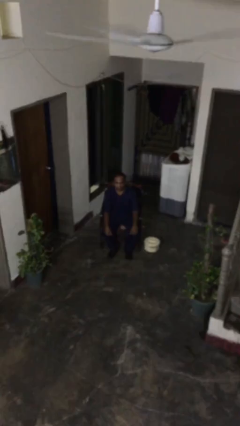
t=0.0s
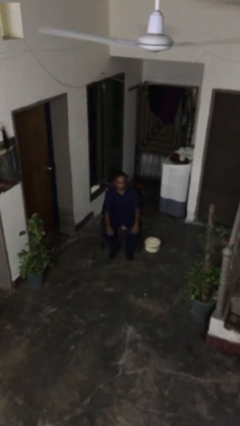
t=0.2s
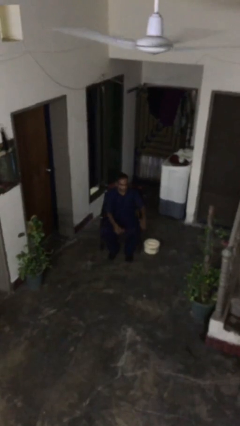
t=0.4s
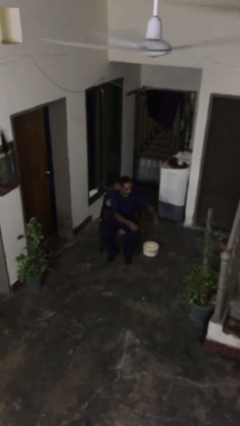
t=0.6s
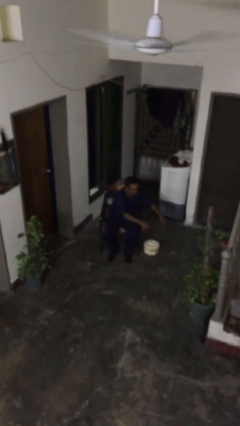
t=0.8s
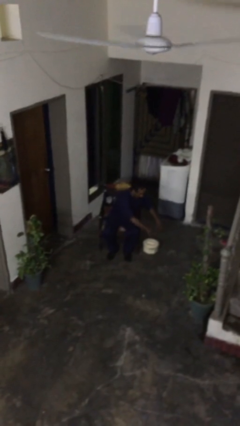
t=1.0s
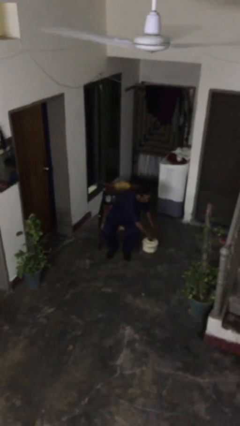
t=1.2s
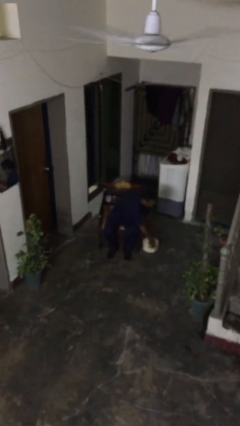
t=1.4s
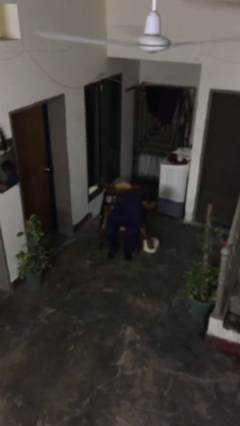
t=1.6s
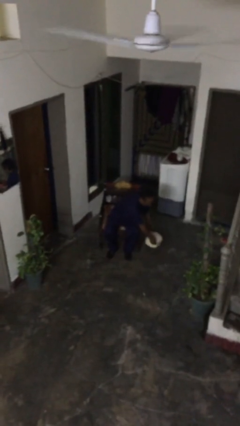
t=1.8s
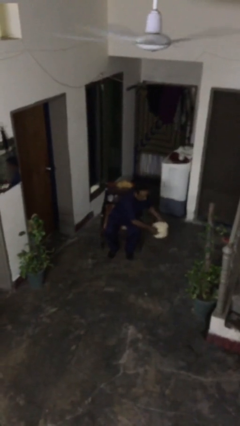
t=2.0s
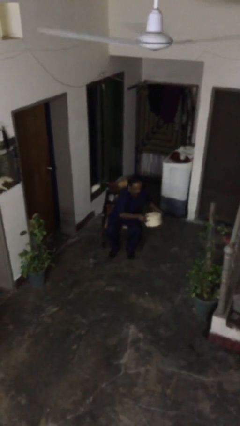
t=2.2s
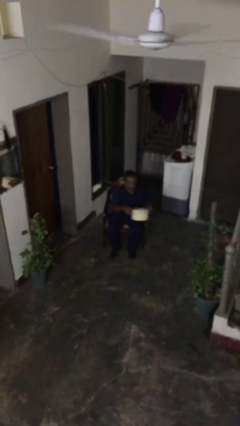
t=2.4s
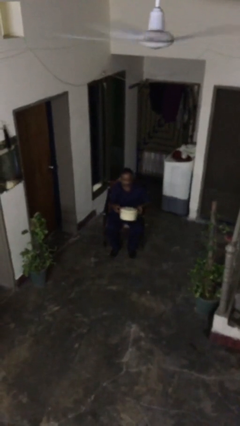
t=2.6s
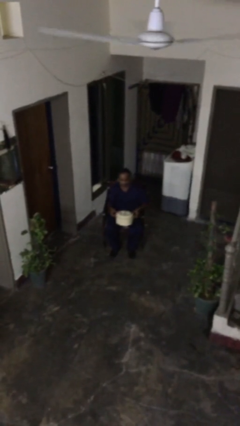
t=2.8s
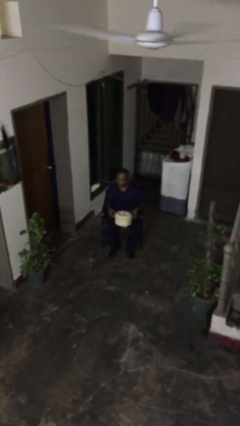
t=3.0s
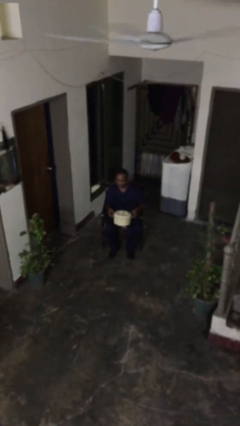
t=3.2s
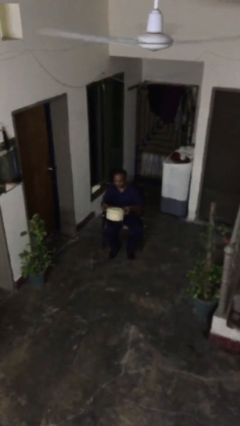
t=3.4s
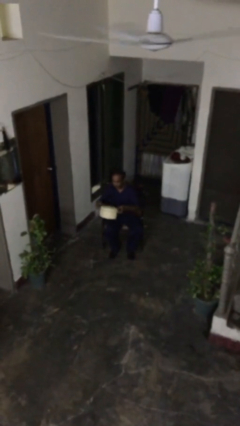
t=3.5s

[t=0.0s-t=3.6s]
person picks up object from floor

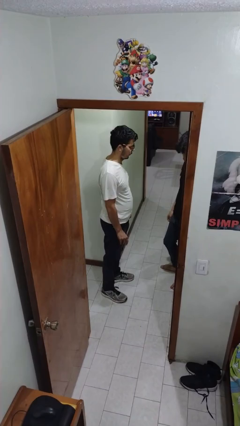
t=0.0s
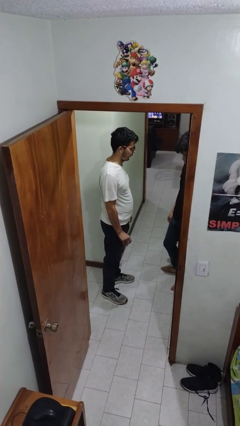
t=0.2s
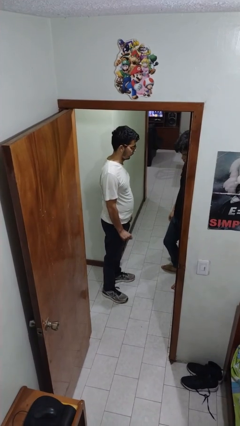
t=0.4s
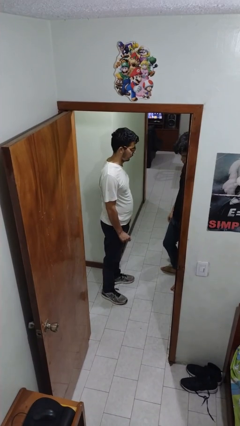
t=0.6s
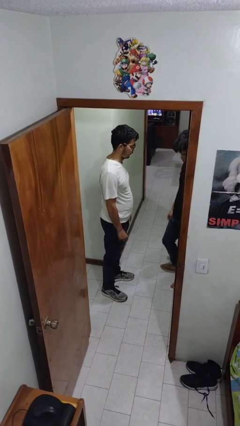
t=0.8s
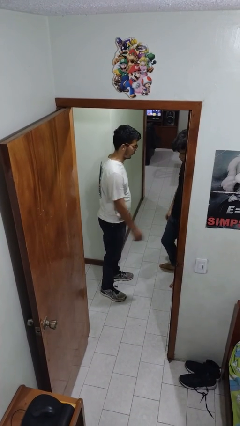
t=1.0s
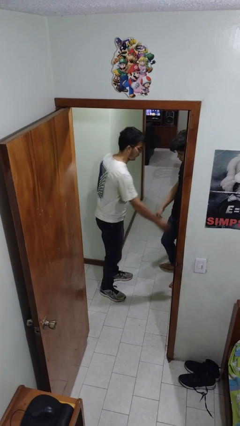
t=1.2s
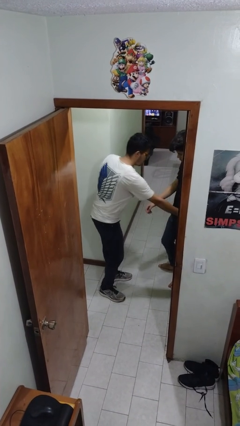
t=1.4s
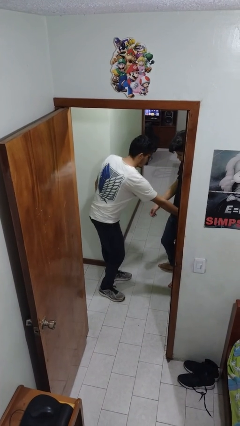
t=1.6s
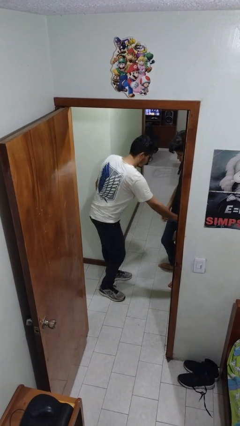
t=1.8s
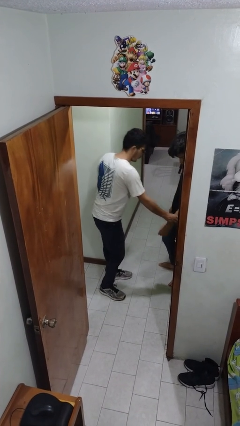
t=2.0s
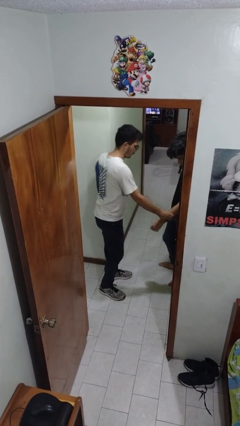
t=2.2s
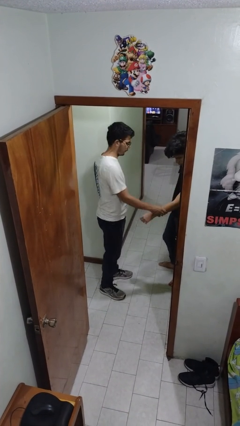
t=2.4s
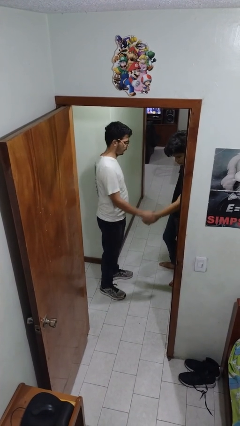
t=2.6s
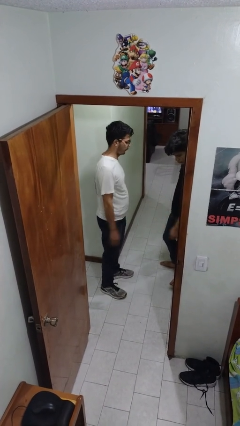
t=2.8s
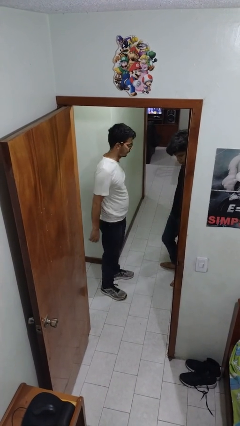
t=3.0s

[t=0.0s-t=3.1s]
person grabs person by forearm

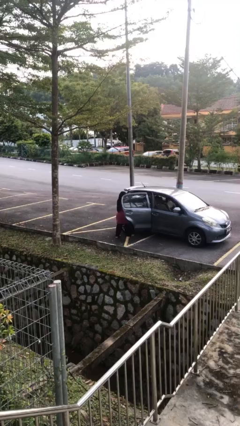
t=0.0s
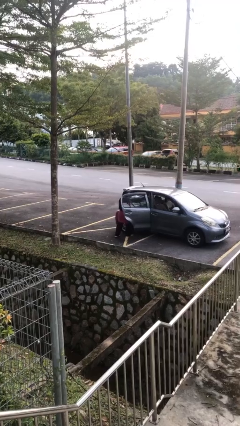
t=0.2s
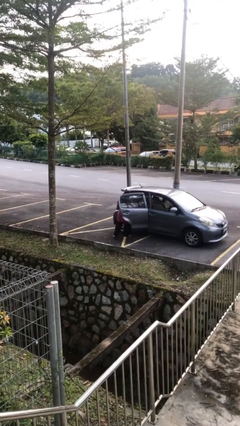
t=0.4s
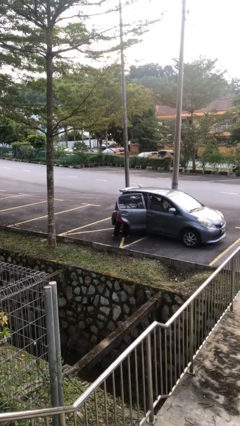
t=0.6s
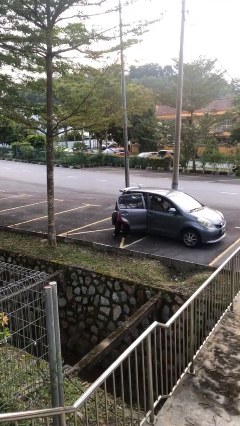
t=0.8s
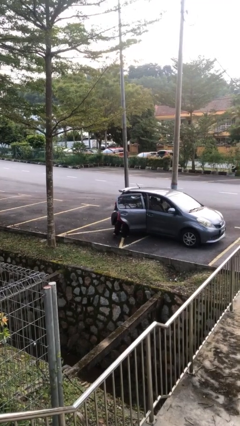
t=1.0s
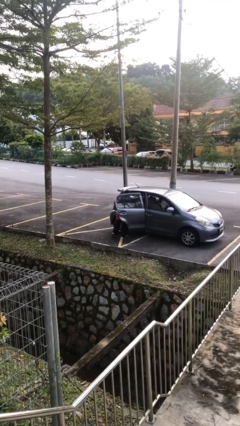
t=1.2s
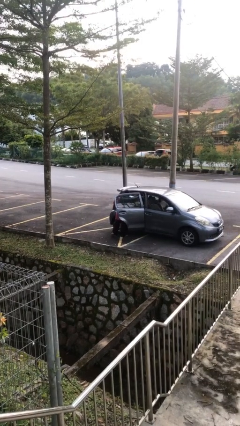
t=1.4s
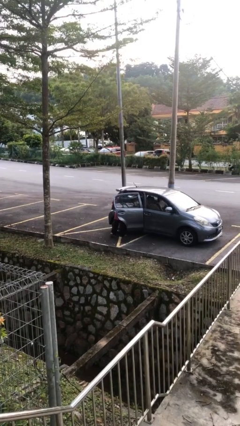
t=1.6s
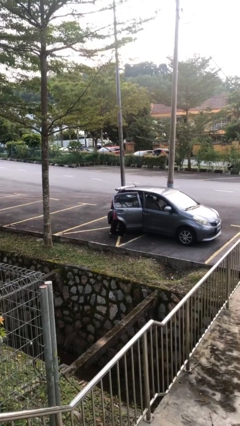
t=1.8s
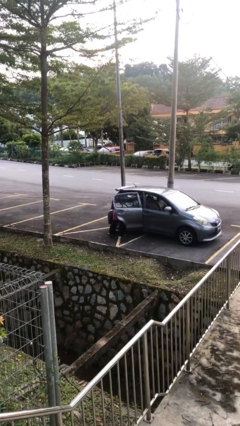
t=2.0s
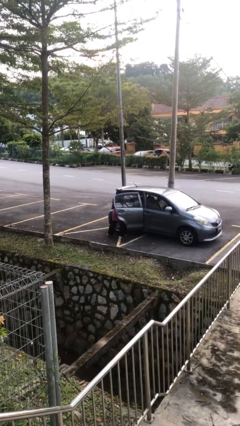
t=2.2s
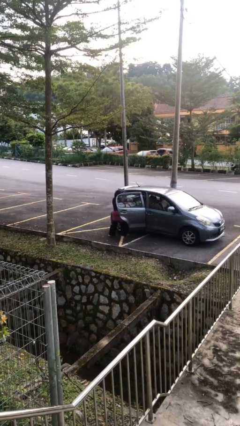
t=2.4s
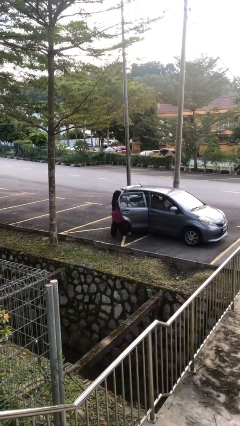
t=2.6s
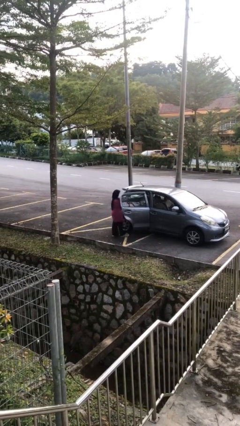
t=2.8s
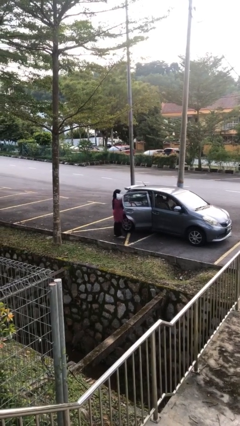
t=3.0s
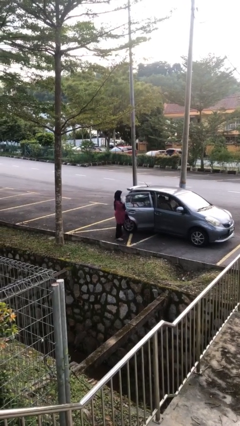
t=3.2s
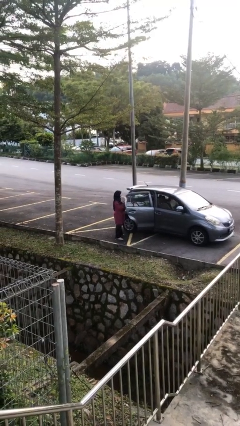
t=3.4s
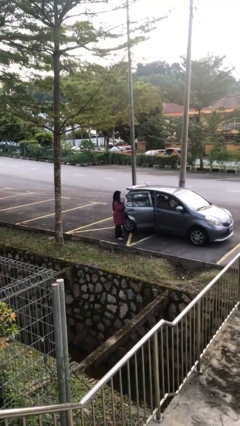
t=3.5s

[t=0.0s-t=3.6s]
person unloads car

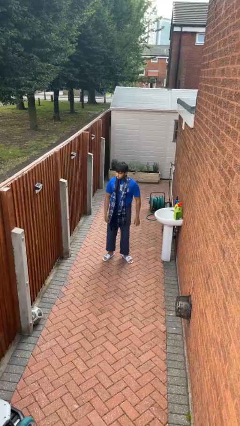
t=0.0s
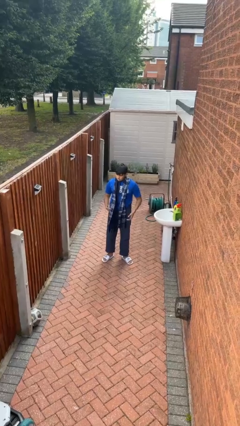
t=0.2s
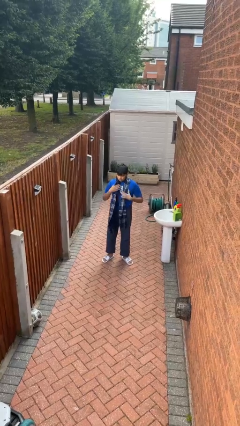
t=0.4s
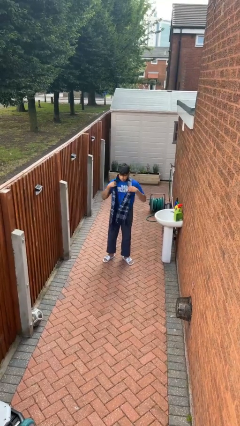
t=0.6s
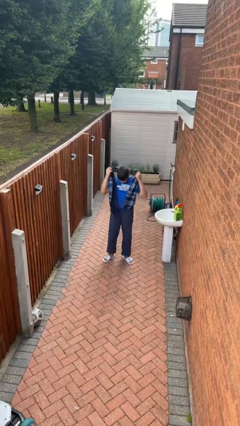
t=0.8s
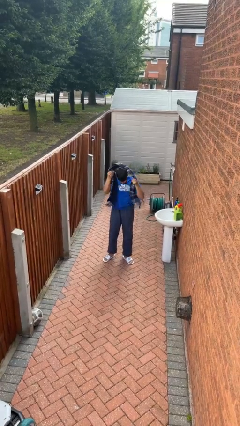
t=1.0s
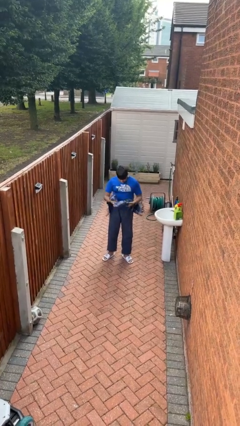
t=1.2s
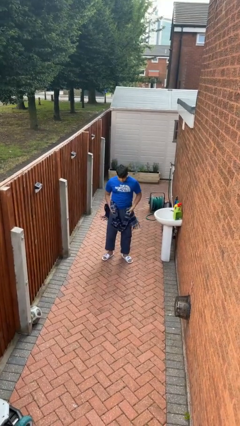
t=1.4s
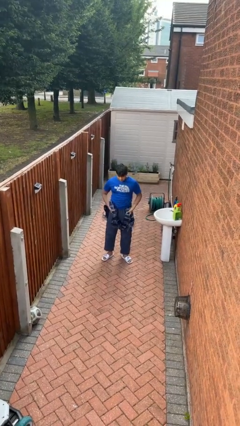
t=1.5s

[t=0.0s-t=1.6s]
person takes off scarf

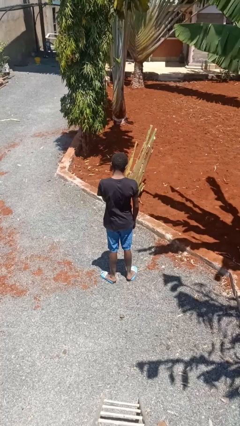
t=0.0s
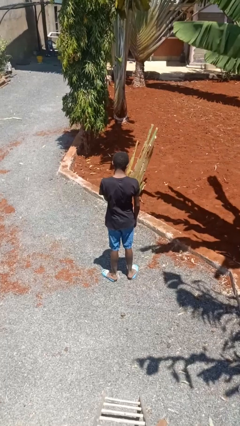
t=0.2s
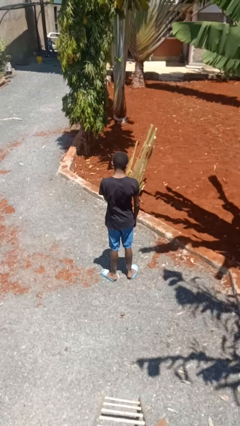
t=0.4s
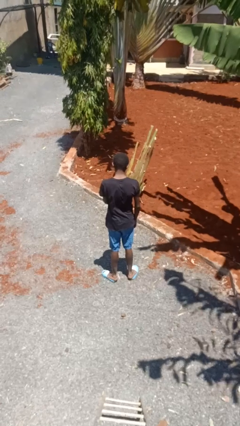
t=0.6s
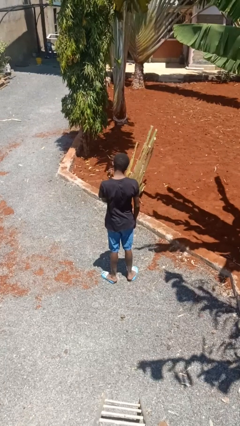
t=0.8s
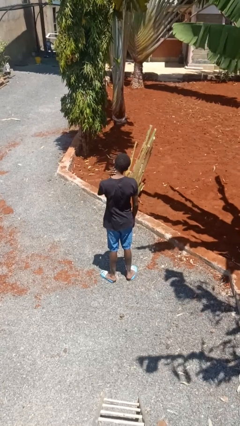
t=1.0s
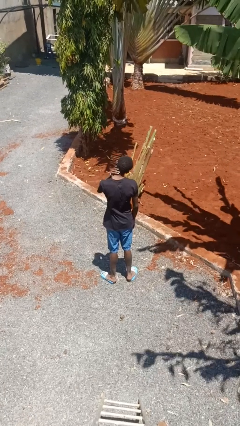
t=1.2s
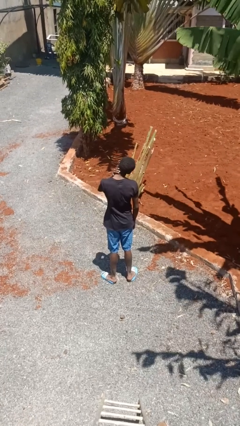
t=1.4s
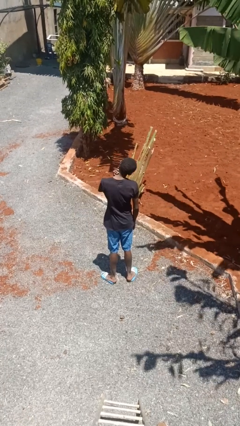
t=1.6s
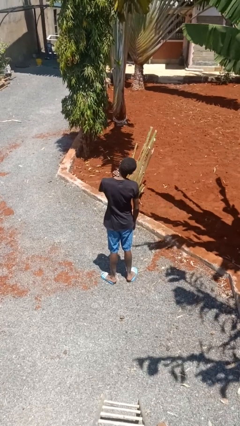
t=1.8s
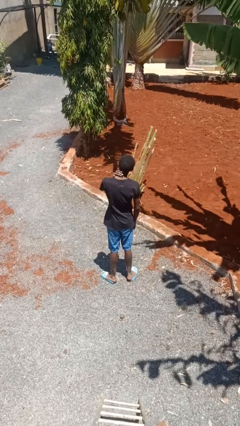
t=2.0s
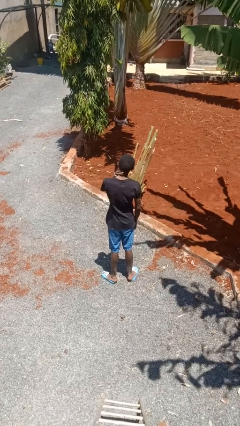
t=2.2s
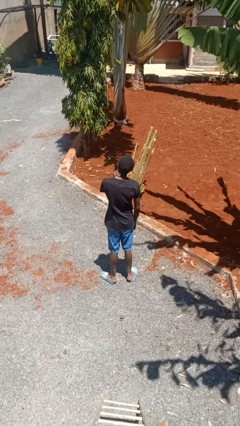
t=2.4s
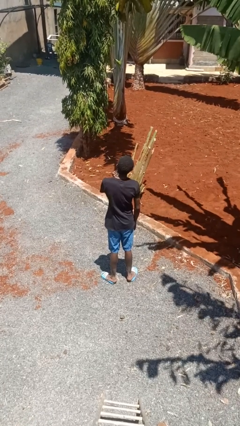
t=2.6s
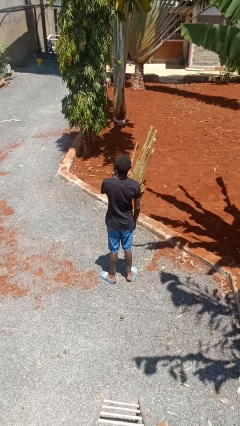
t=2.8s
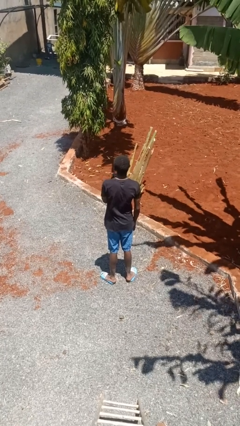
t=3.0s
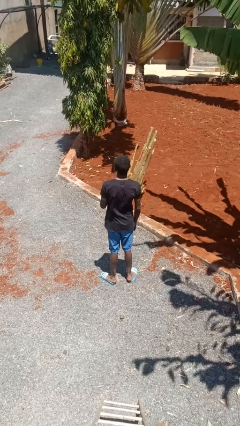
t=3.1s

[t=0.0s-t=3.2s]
person rubs neck

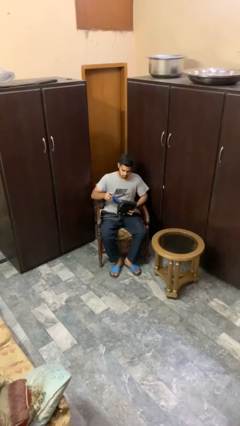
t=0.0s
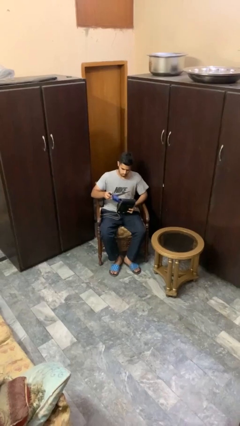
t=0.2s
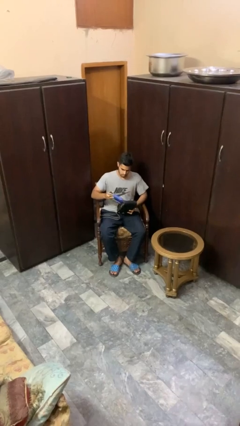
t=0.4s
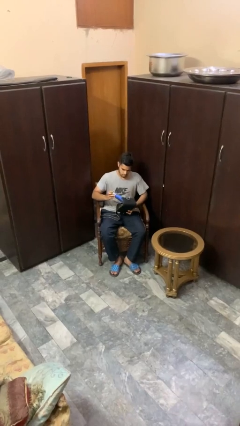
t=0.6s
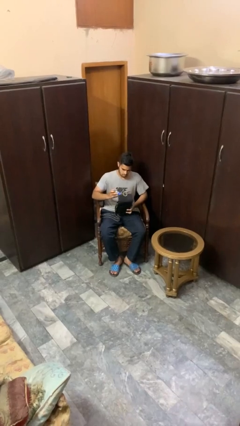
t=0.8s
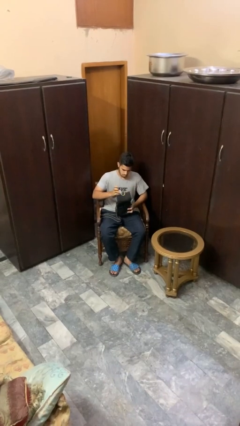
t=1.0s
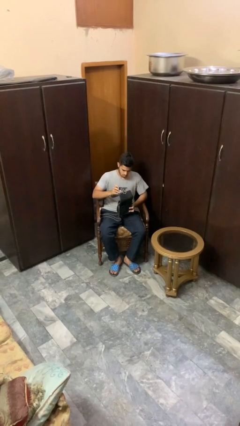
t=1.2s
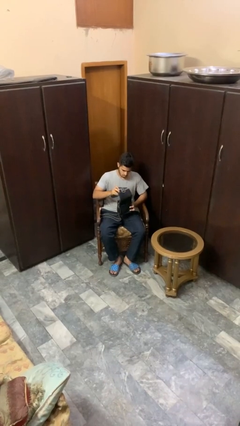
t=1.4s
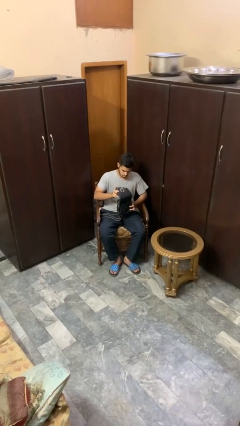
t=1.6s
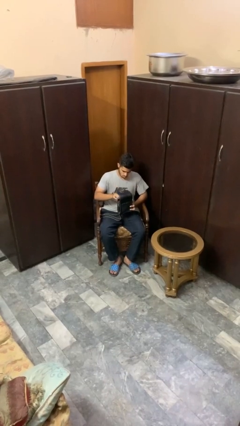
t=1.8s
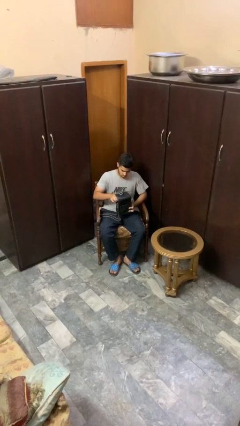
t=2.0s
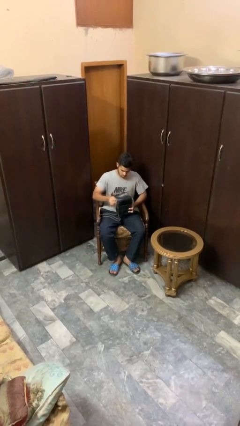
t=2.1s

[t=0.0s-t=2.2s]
person puts object into purse

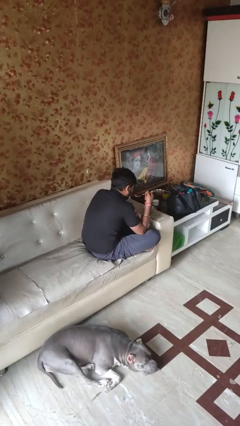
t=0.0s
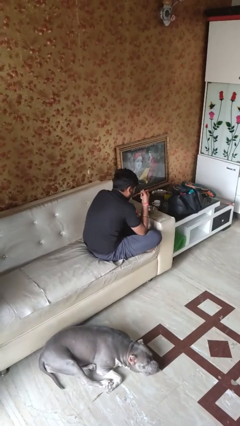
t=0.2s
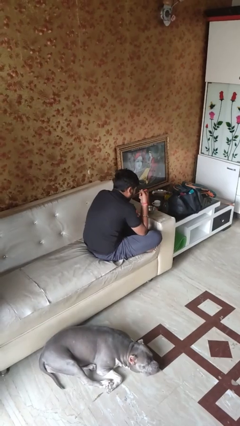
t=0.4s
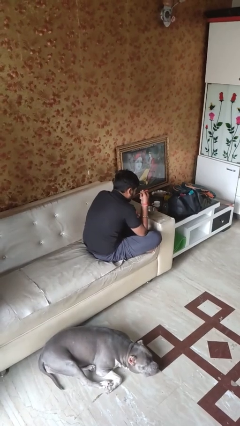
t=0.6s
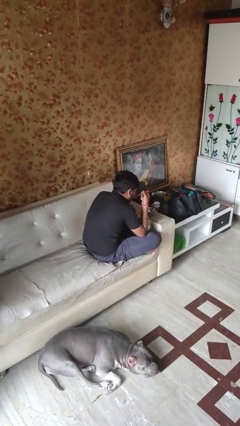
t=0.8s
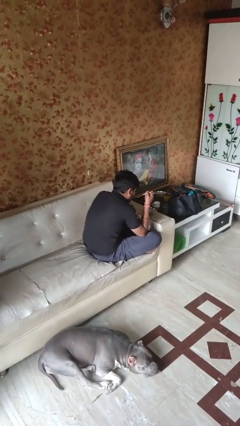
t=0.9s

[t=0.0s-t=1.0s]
person eats with utensil
